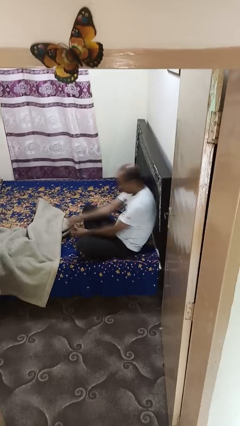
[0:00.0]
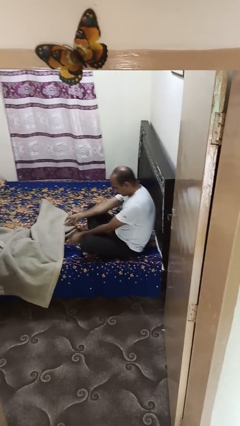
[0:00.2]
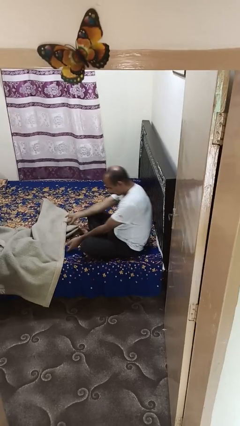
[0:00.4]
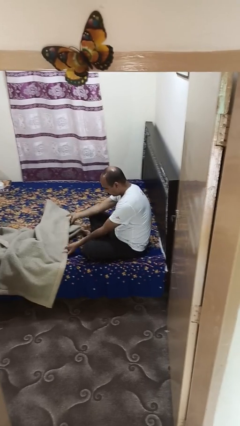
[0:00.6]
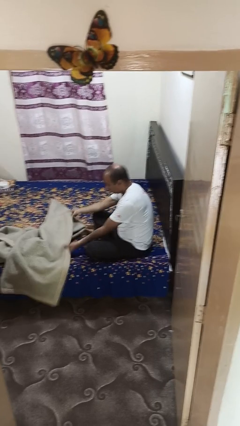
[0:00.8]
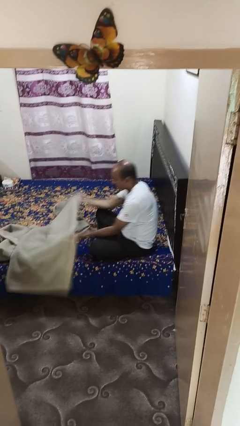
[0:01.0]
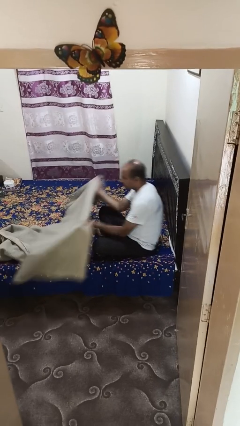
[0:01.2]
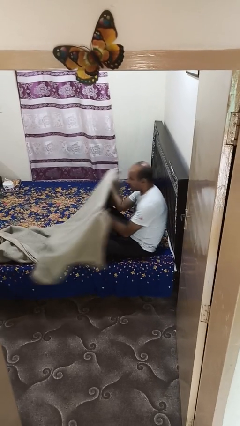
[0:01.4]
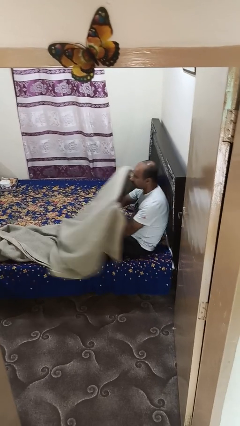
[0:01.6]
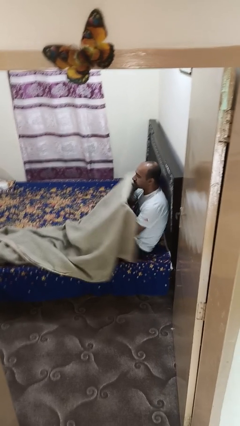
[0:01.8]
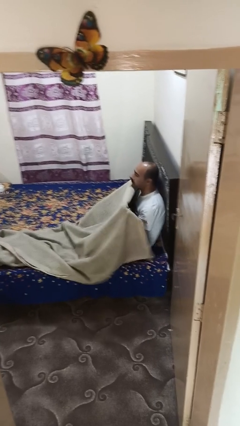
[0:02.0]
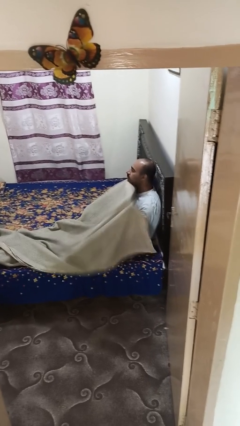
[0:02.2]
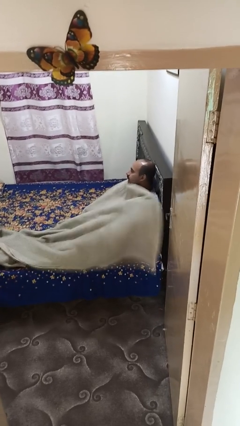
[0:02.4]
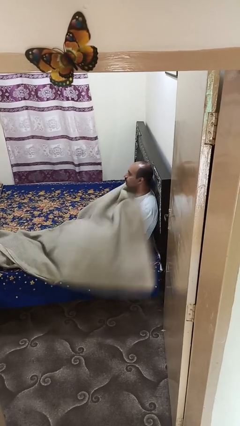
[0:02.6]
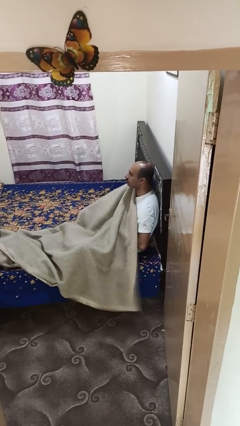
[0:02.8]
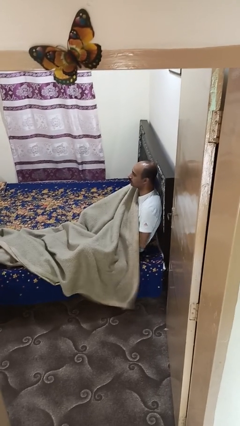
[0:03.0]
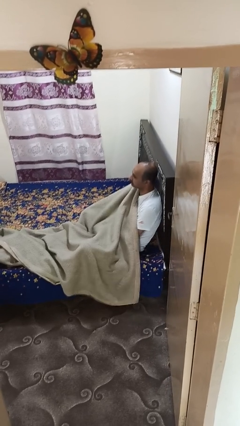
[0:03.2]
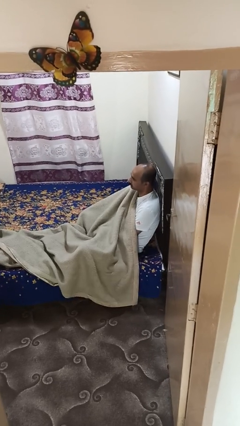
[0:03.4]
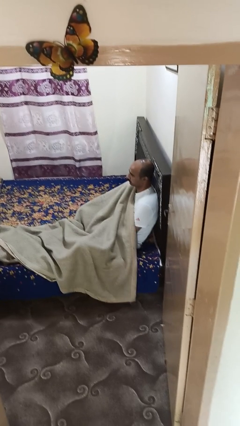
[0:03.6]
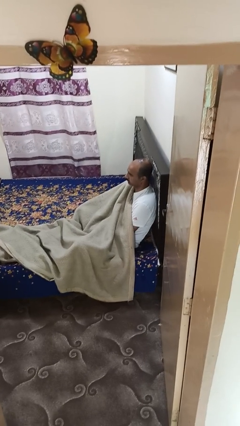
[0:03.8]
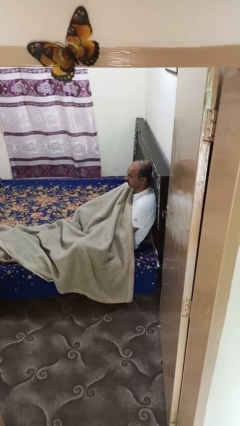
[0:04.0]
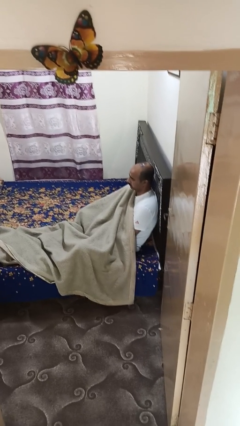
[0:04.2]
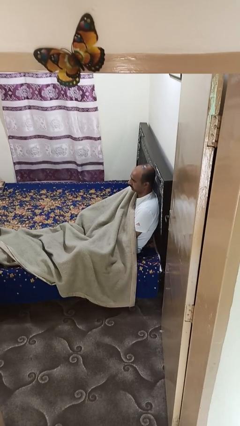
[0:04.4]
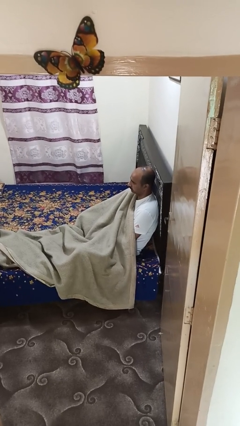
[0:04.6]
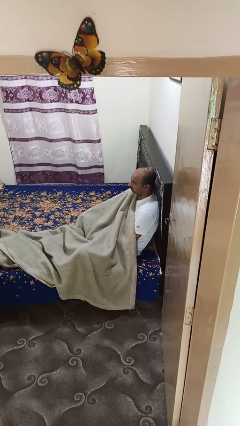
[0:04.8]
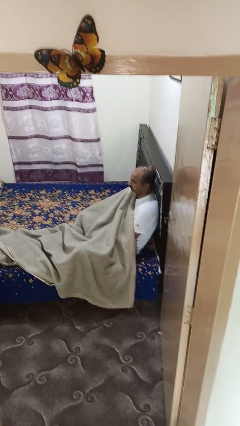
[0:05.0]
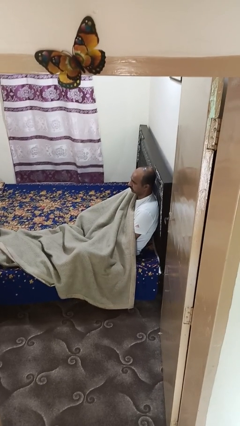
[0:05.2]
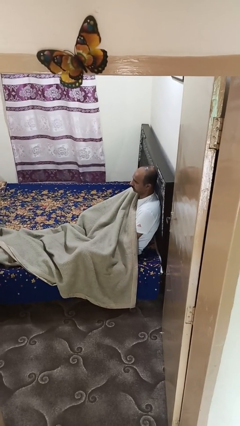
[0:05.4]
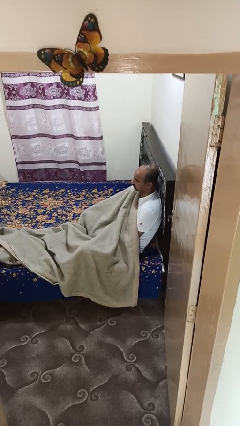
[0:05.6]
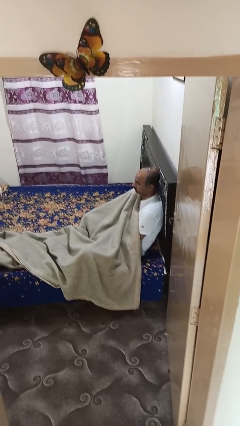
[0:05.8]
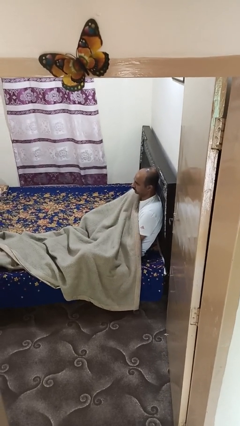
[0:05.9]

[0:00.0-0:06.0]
person covers with blanket

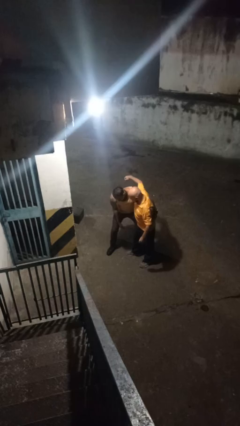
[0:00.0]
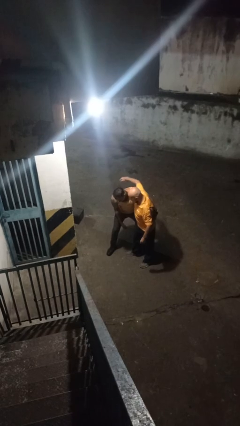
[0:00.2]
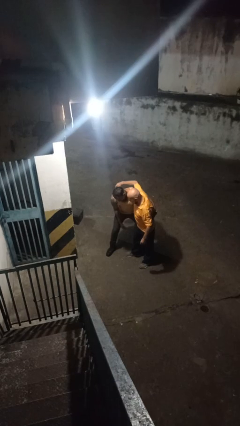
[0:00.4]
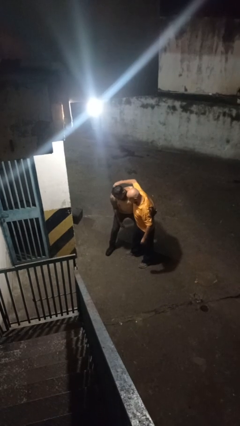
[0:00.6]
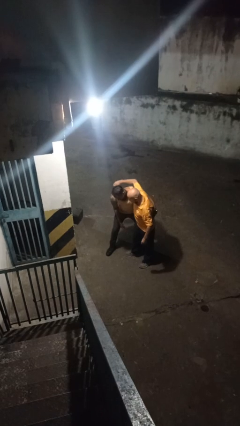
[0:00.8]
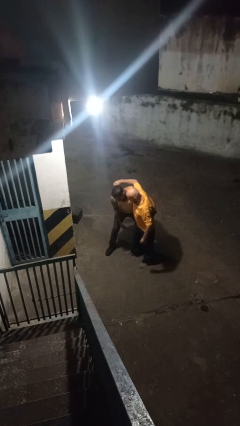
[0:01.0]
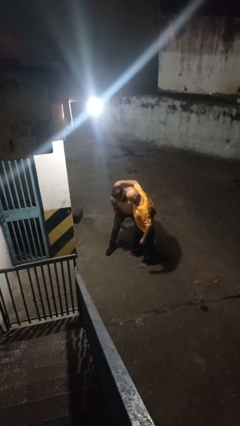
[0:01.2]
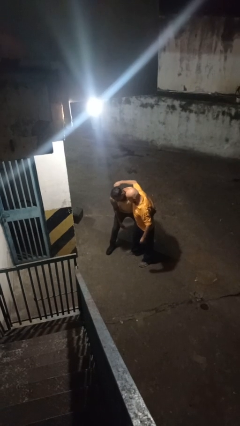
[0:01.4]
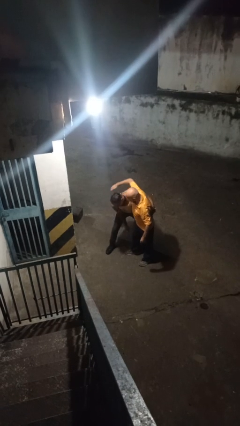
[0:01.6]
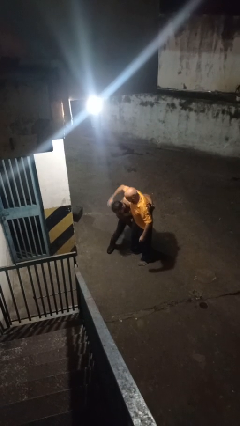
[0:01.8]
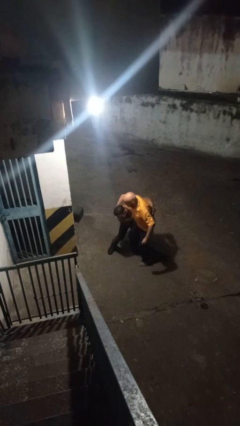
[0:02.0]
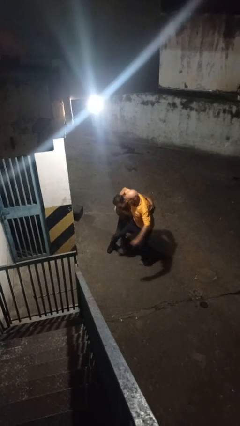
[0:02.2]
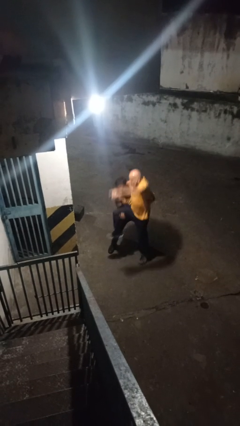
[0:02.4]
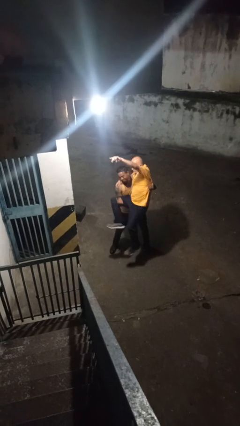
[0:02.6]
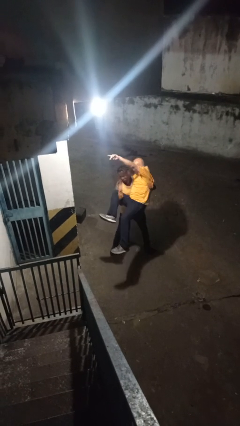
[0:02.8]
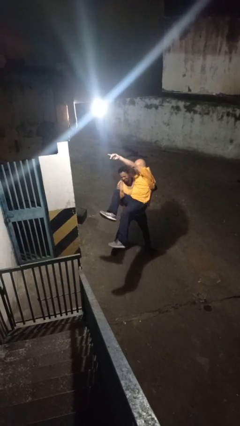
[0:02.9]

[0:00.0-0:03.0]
person picks up person

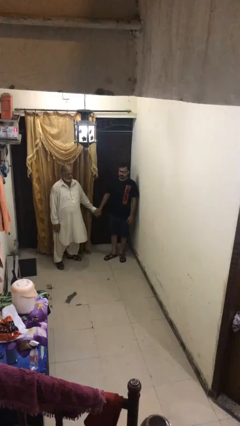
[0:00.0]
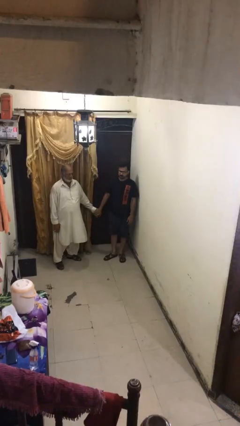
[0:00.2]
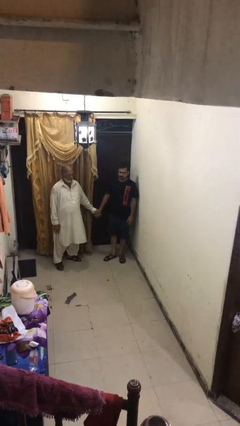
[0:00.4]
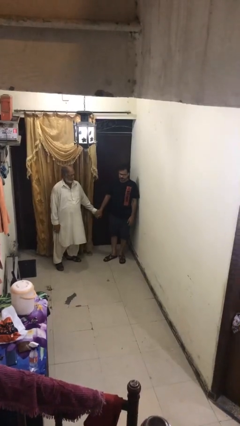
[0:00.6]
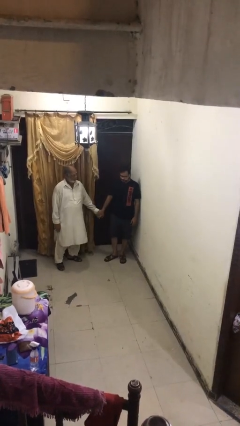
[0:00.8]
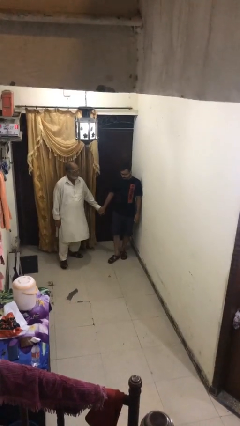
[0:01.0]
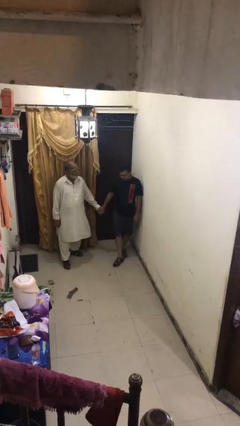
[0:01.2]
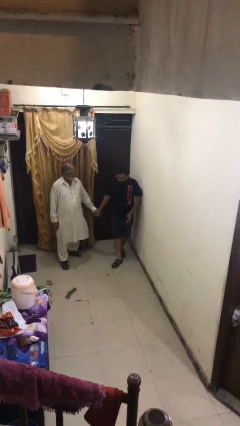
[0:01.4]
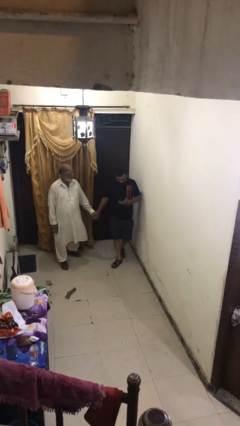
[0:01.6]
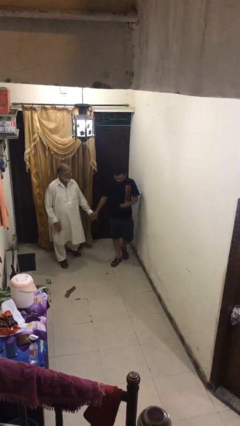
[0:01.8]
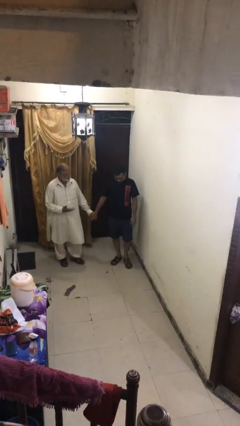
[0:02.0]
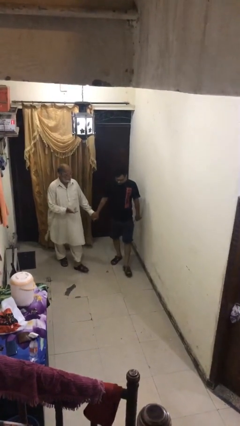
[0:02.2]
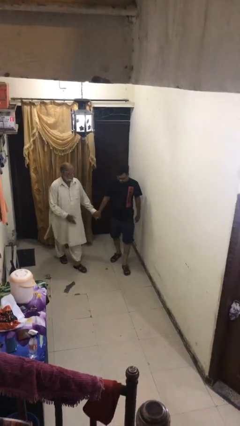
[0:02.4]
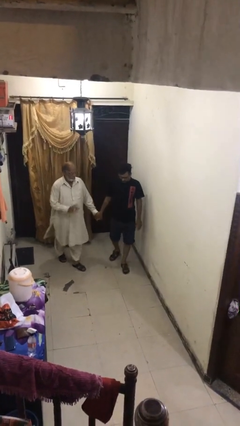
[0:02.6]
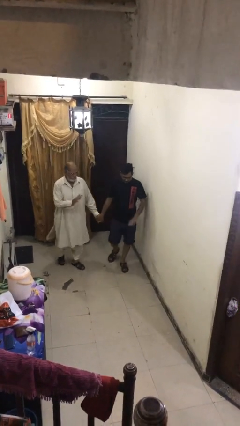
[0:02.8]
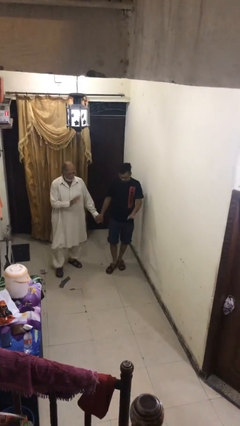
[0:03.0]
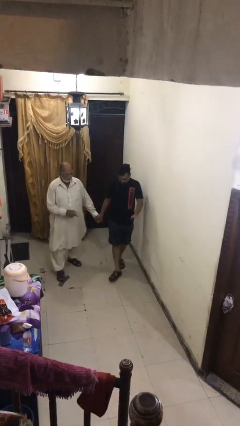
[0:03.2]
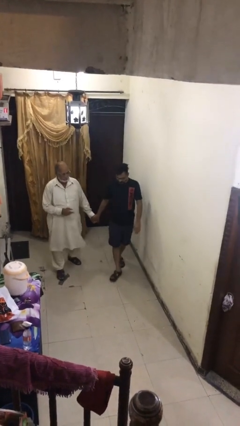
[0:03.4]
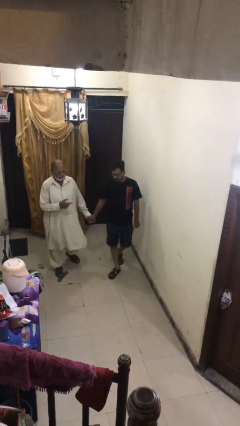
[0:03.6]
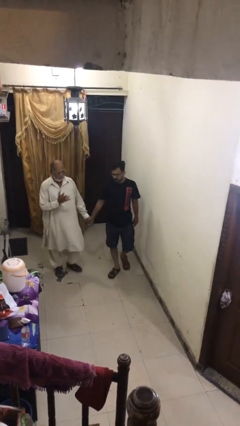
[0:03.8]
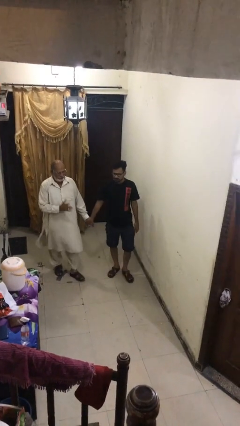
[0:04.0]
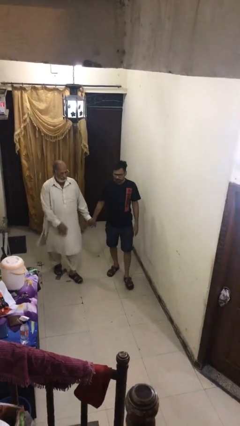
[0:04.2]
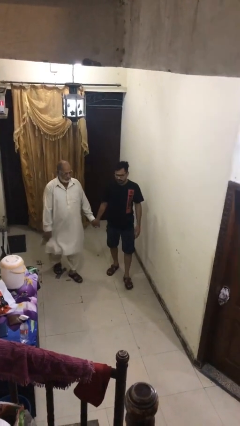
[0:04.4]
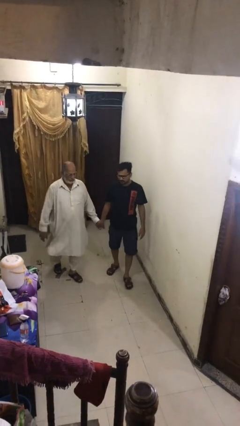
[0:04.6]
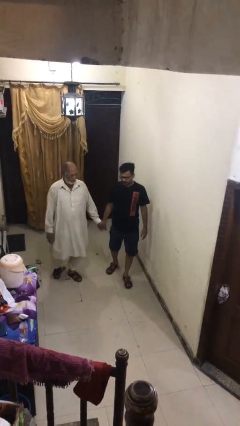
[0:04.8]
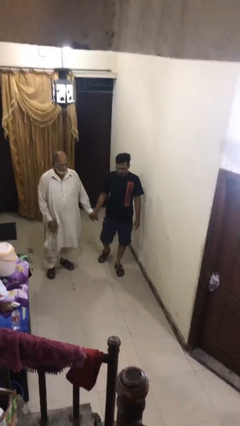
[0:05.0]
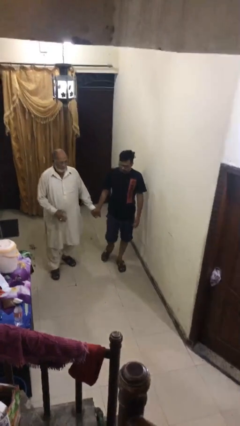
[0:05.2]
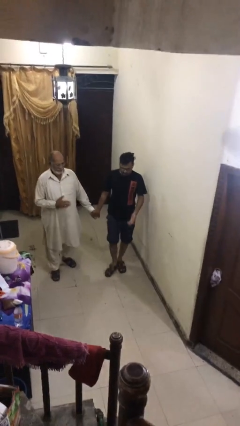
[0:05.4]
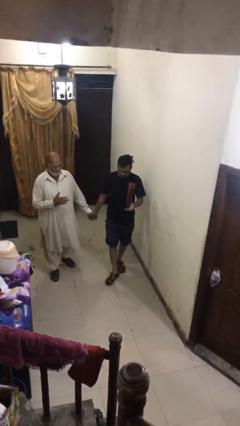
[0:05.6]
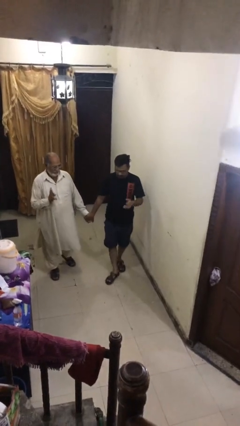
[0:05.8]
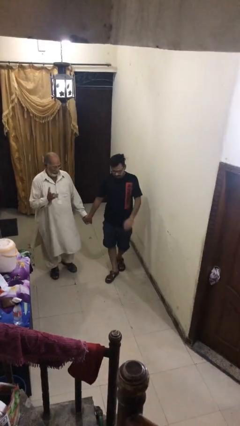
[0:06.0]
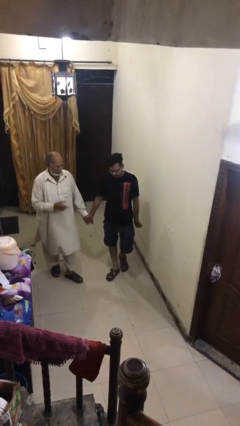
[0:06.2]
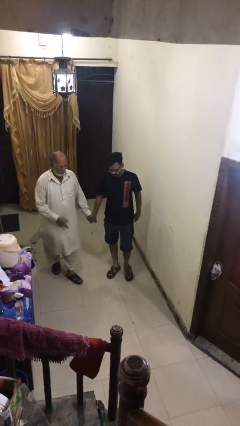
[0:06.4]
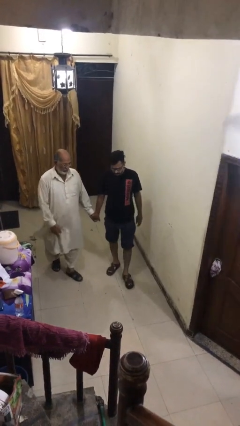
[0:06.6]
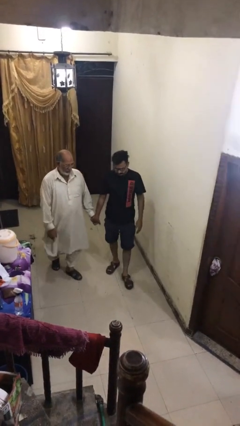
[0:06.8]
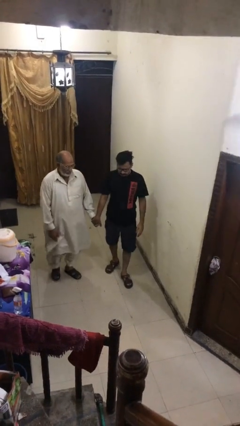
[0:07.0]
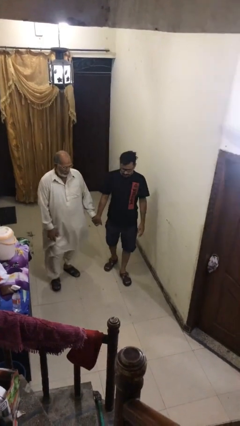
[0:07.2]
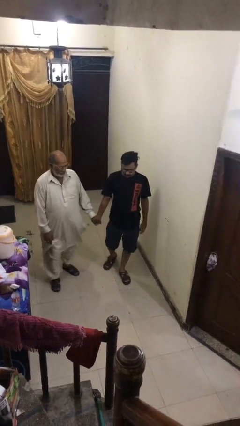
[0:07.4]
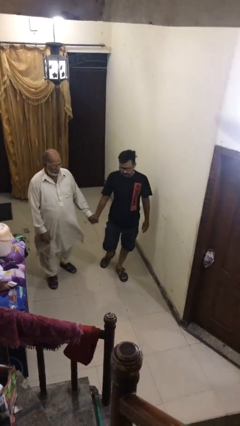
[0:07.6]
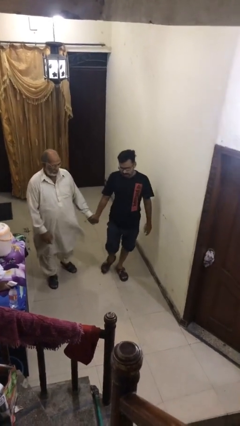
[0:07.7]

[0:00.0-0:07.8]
person holds hand

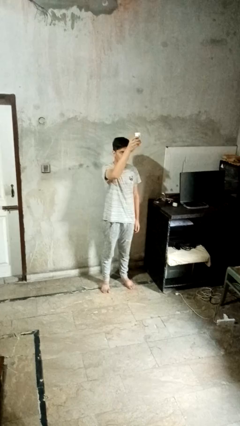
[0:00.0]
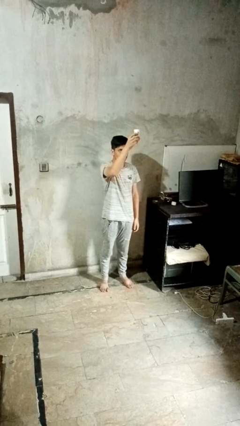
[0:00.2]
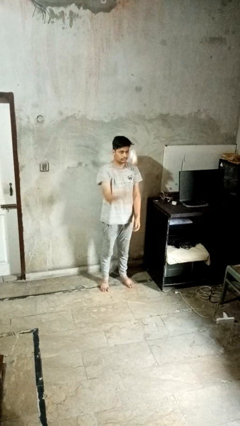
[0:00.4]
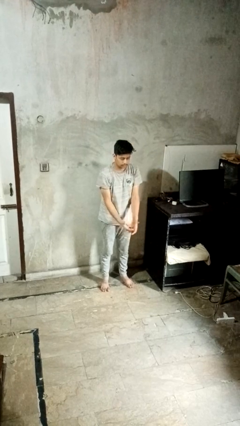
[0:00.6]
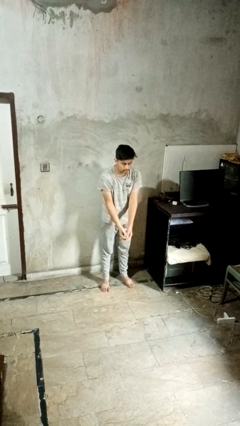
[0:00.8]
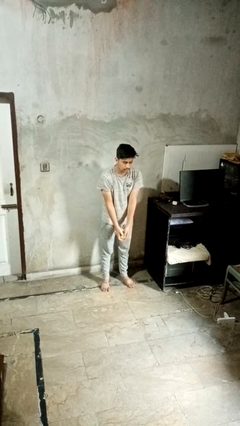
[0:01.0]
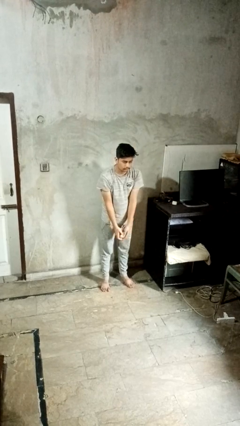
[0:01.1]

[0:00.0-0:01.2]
person catches dropped object
